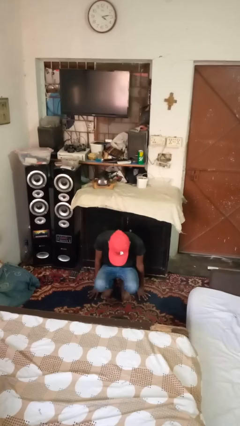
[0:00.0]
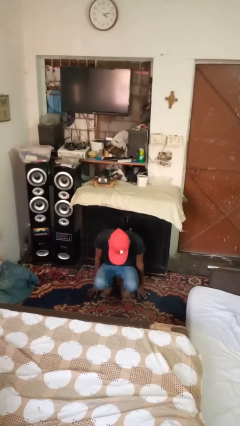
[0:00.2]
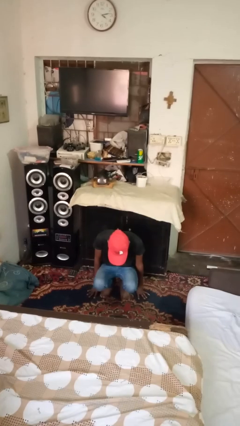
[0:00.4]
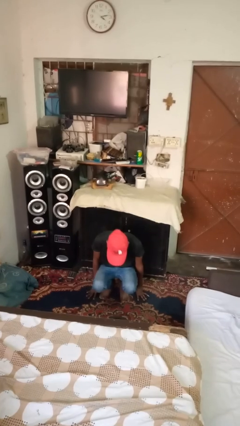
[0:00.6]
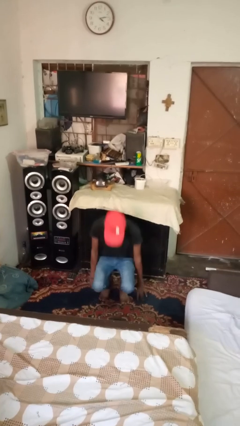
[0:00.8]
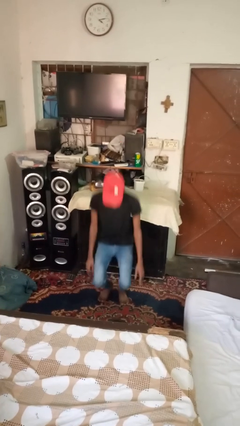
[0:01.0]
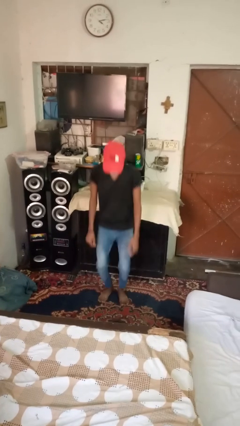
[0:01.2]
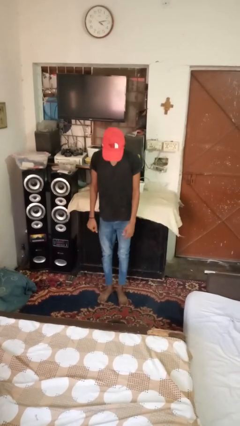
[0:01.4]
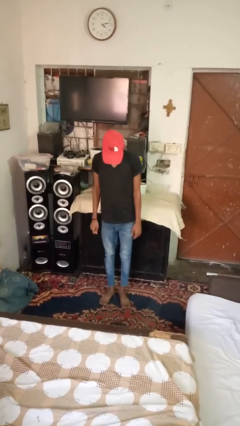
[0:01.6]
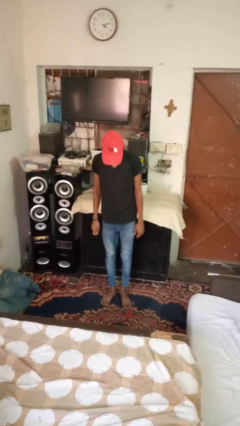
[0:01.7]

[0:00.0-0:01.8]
person stands up from floor

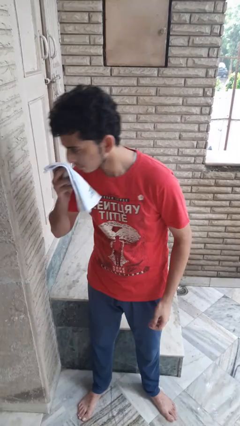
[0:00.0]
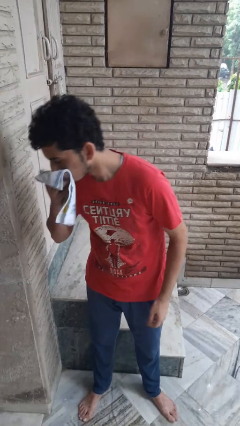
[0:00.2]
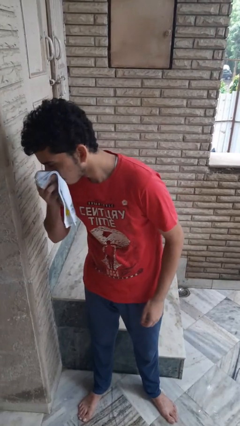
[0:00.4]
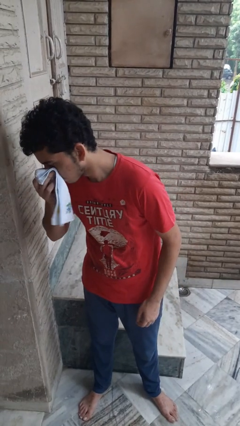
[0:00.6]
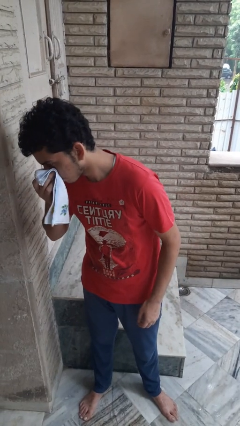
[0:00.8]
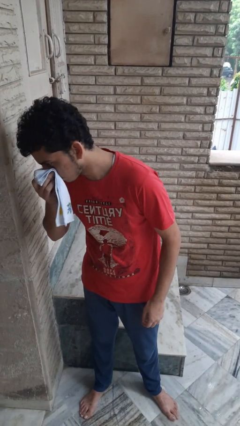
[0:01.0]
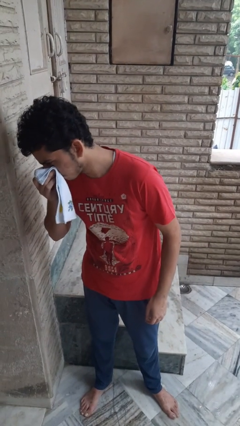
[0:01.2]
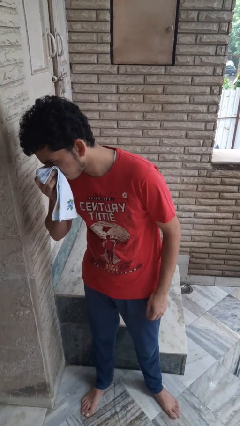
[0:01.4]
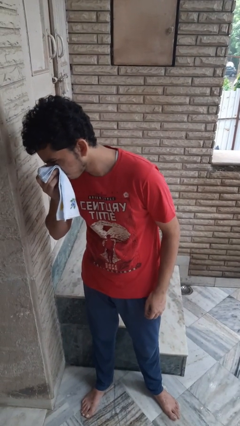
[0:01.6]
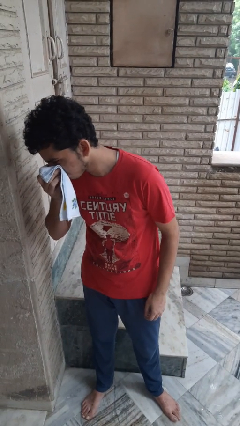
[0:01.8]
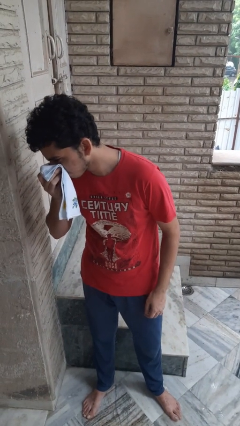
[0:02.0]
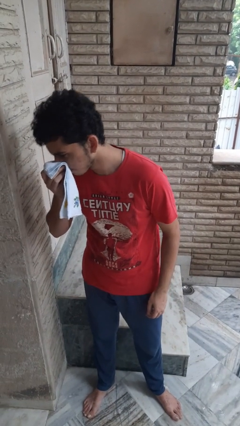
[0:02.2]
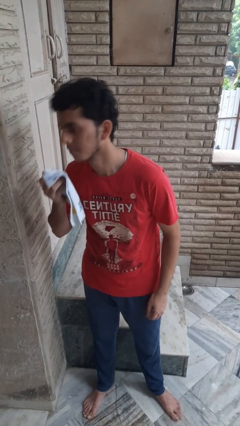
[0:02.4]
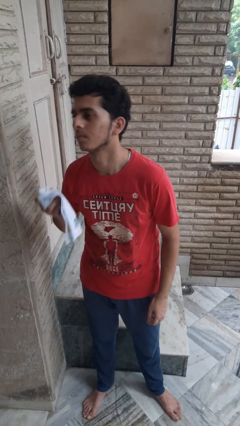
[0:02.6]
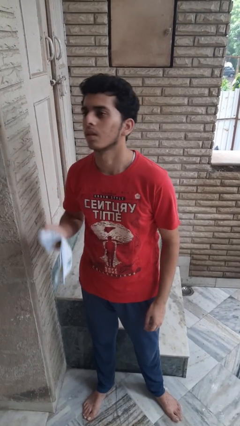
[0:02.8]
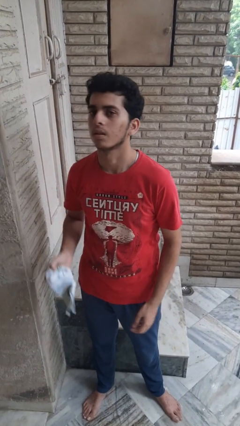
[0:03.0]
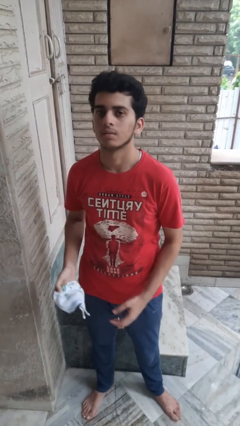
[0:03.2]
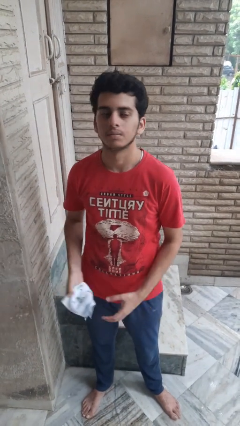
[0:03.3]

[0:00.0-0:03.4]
person blows nose

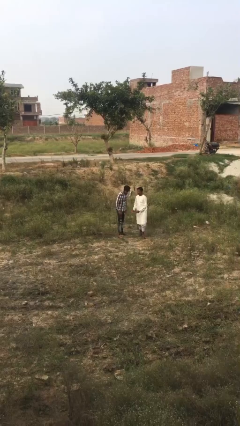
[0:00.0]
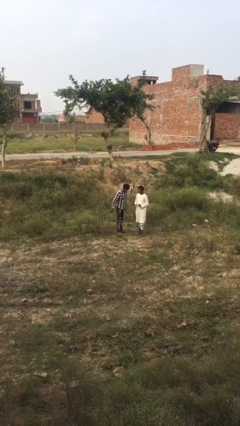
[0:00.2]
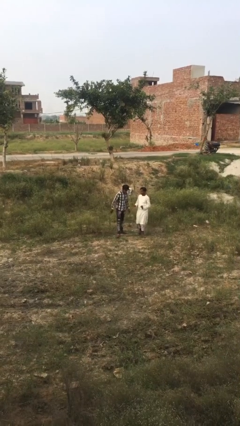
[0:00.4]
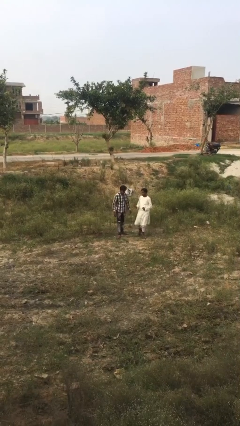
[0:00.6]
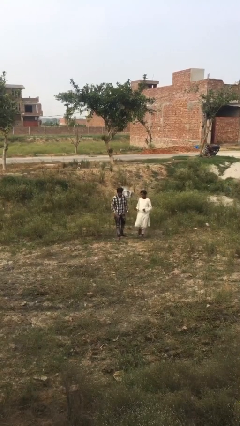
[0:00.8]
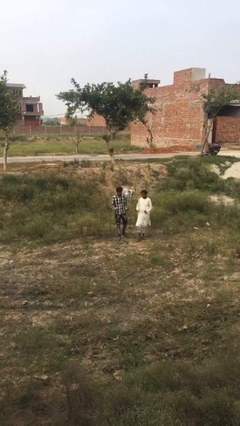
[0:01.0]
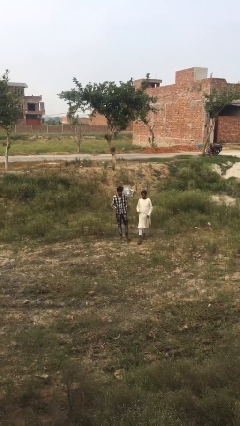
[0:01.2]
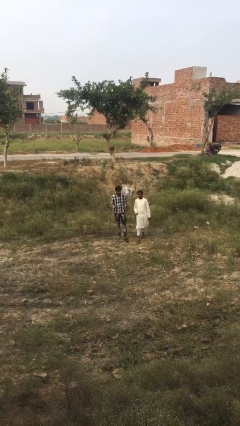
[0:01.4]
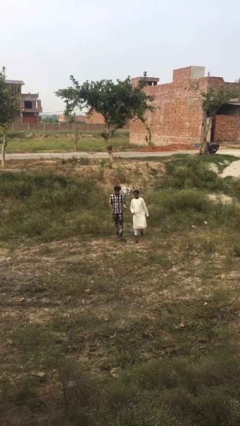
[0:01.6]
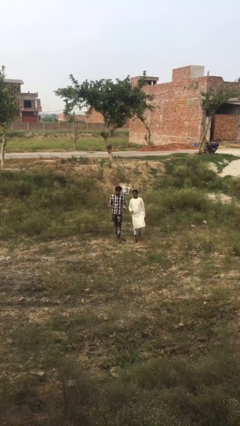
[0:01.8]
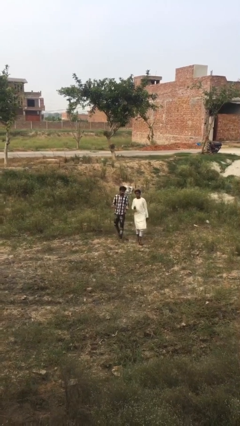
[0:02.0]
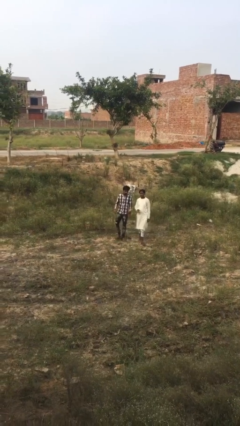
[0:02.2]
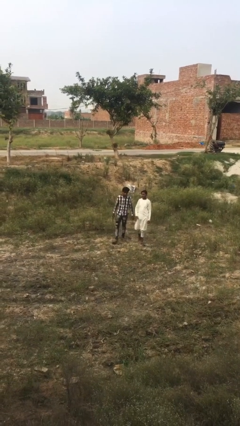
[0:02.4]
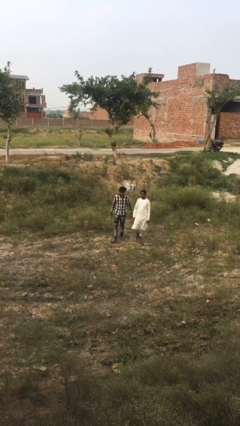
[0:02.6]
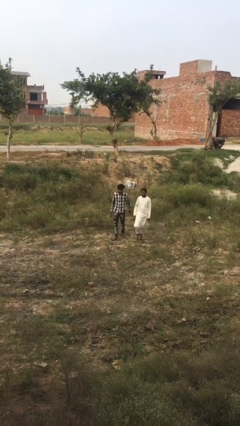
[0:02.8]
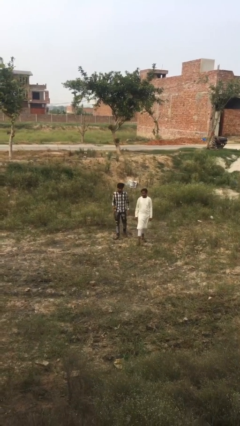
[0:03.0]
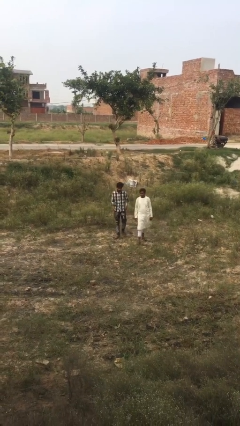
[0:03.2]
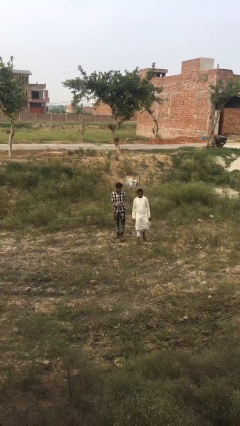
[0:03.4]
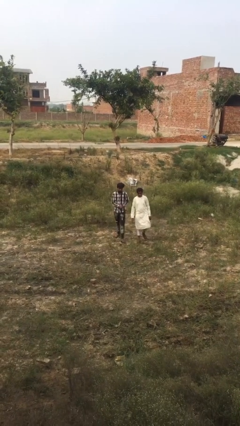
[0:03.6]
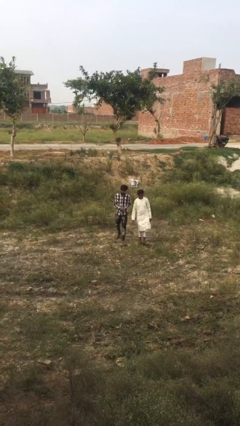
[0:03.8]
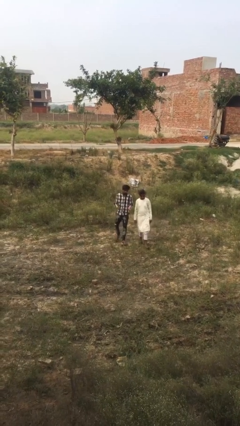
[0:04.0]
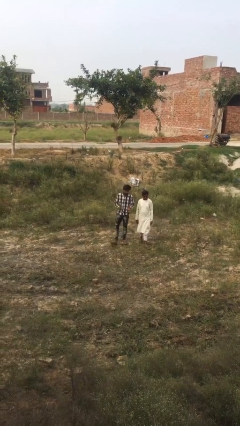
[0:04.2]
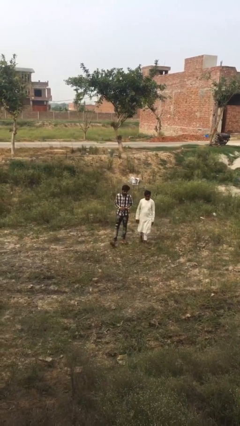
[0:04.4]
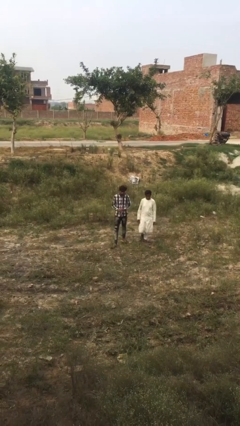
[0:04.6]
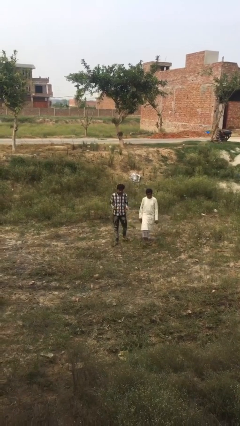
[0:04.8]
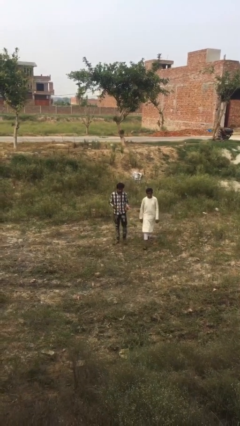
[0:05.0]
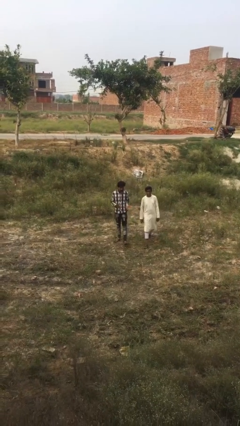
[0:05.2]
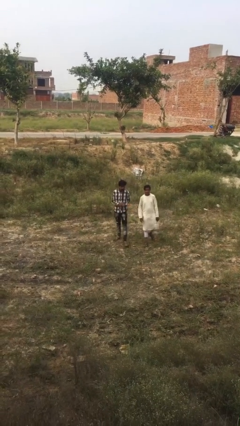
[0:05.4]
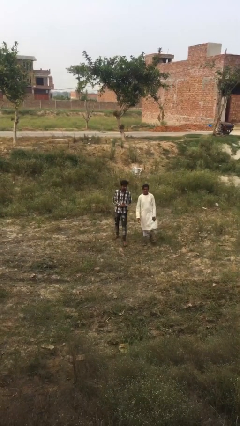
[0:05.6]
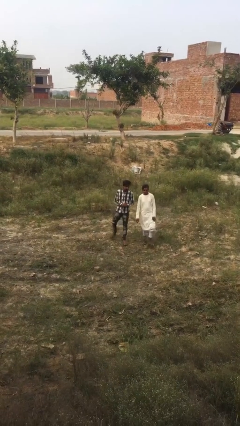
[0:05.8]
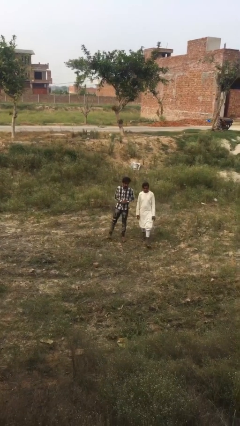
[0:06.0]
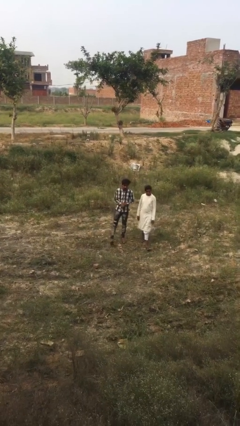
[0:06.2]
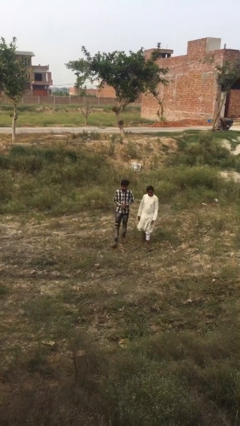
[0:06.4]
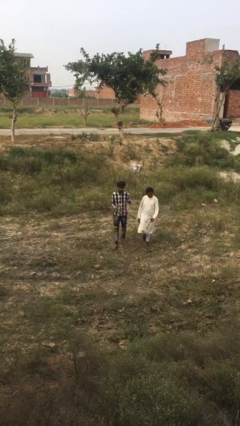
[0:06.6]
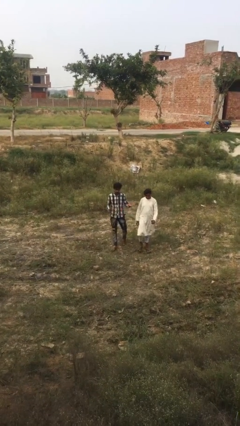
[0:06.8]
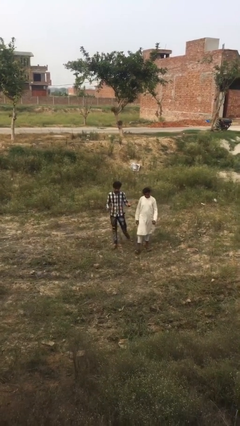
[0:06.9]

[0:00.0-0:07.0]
person talks to person

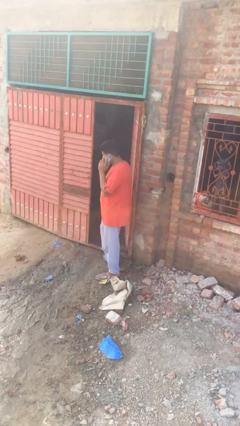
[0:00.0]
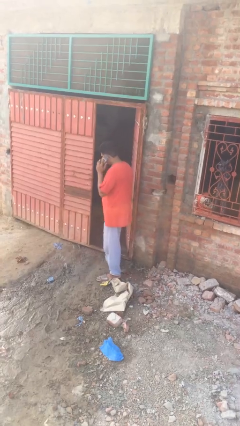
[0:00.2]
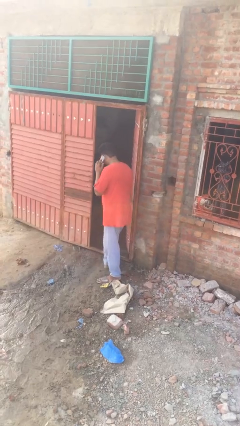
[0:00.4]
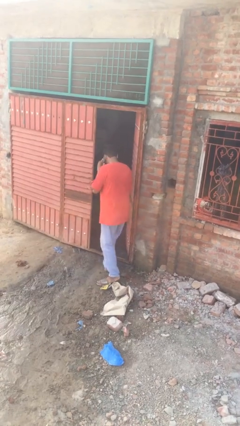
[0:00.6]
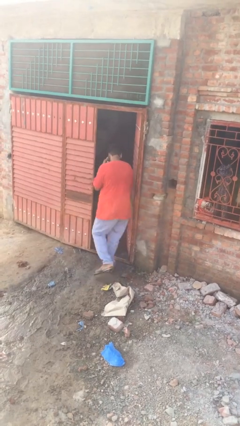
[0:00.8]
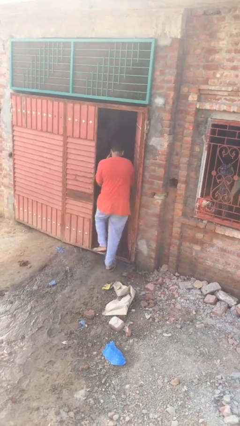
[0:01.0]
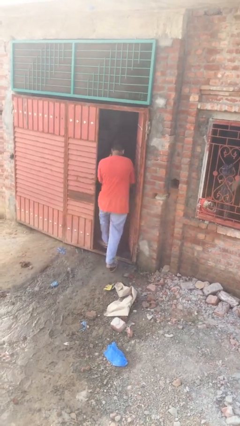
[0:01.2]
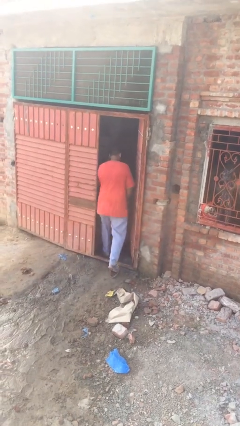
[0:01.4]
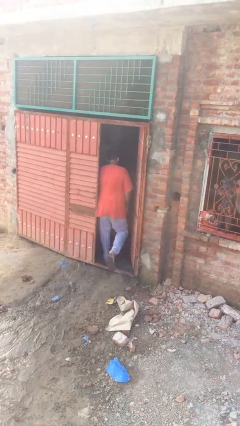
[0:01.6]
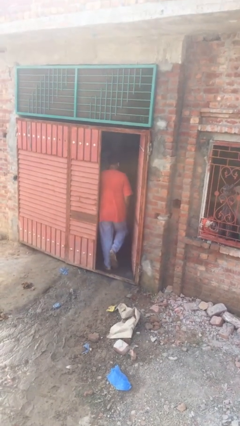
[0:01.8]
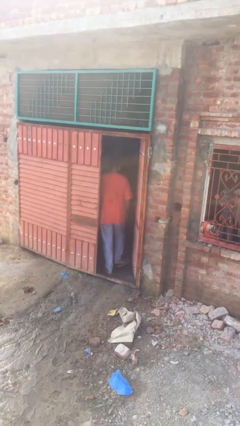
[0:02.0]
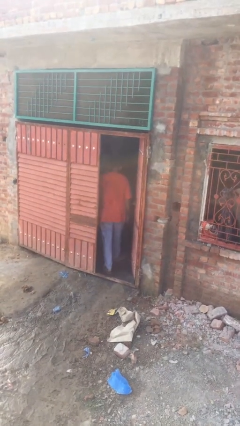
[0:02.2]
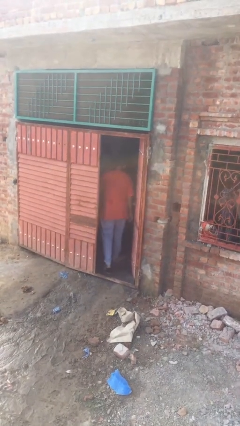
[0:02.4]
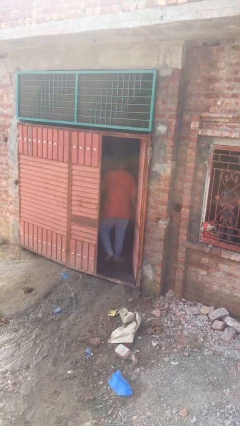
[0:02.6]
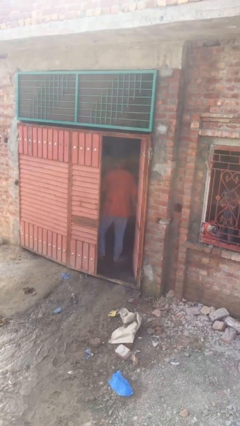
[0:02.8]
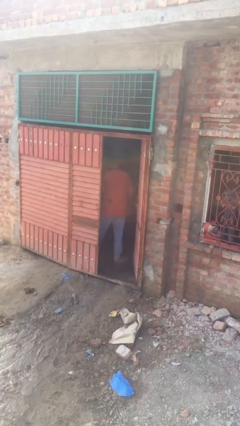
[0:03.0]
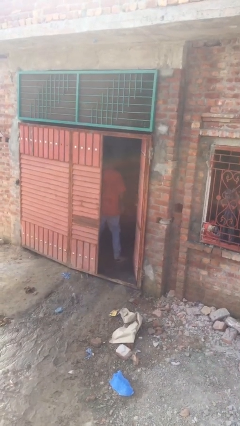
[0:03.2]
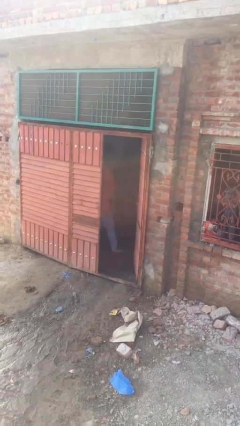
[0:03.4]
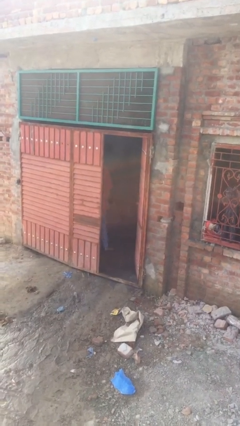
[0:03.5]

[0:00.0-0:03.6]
person exits scene through structure

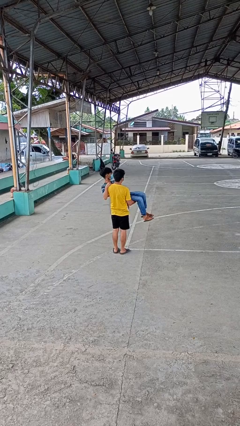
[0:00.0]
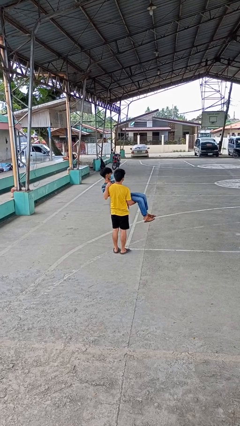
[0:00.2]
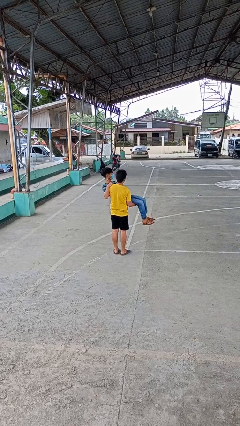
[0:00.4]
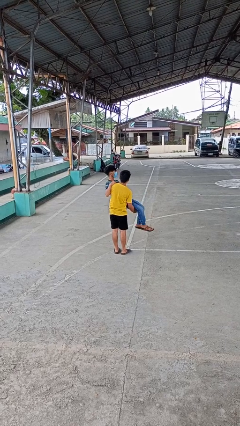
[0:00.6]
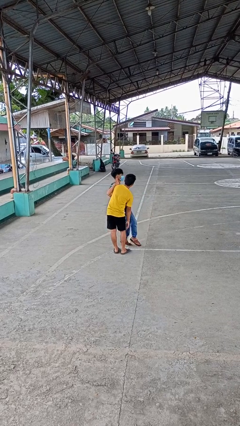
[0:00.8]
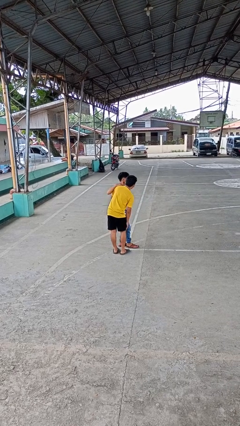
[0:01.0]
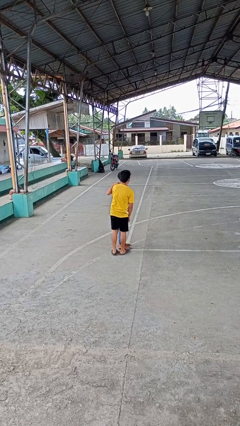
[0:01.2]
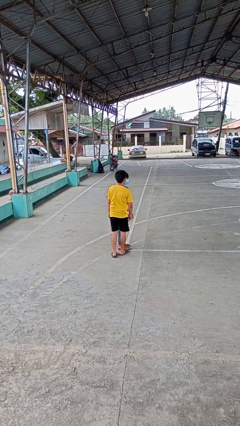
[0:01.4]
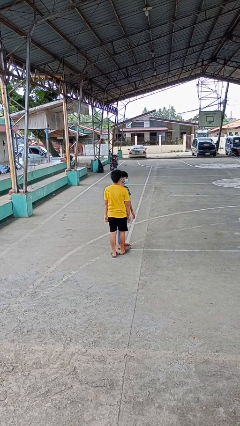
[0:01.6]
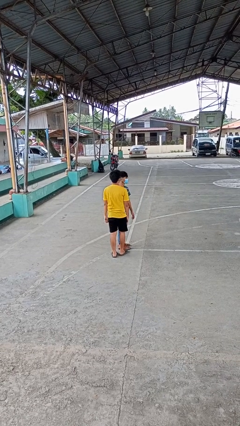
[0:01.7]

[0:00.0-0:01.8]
person puts down person

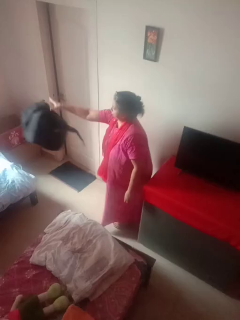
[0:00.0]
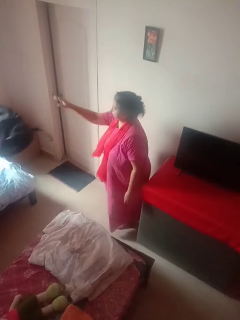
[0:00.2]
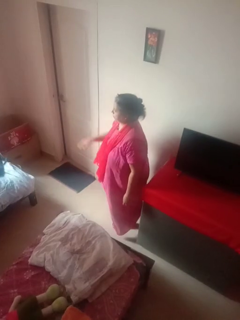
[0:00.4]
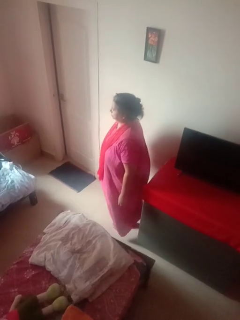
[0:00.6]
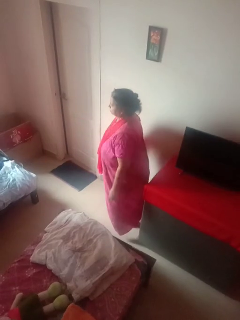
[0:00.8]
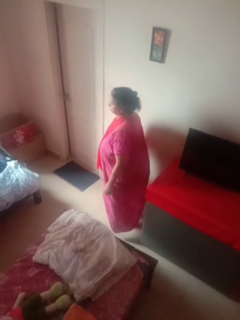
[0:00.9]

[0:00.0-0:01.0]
person throws object on bed
